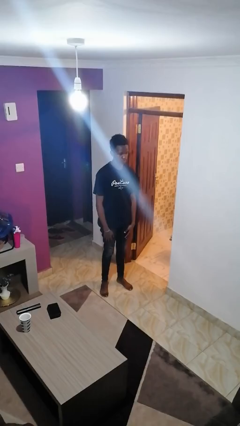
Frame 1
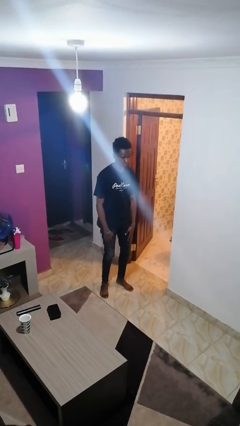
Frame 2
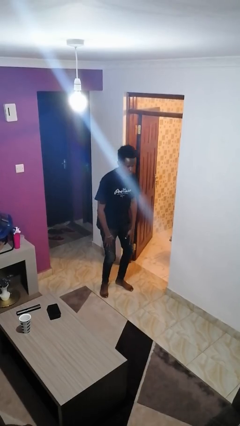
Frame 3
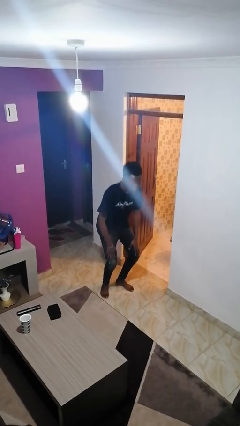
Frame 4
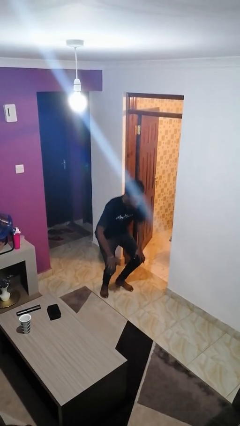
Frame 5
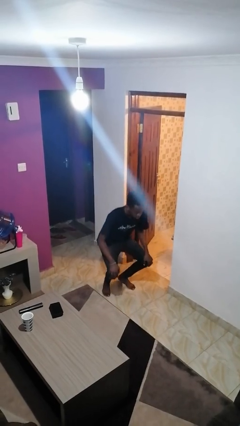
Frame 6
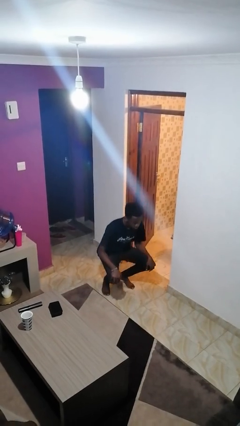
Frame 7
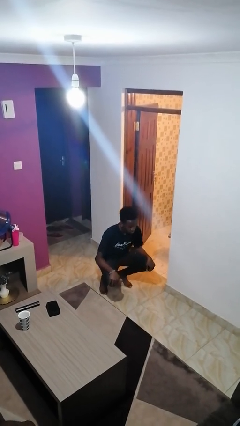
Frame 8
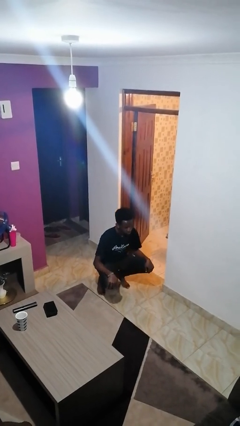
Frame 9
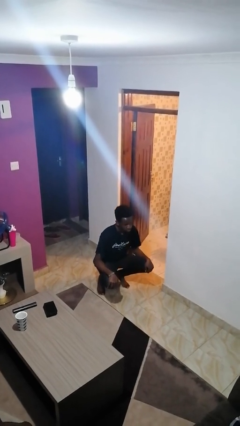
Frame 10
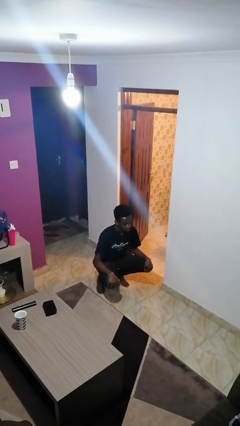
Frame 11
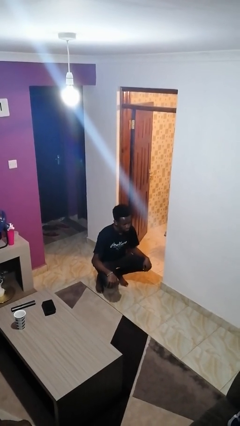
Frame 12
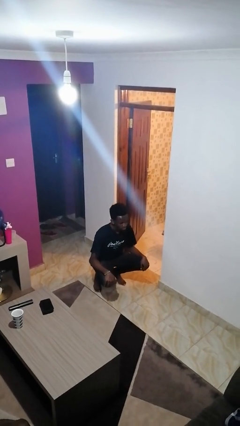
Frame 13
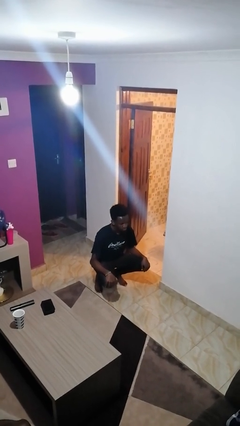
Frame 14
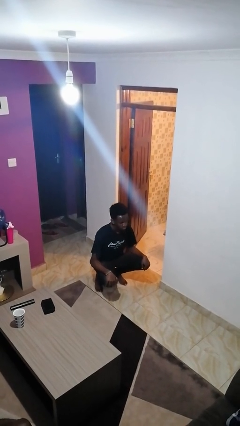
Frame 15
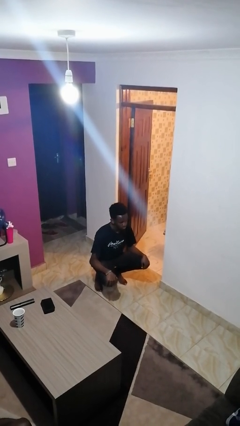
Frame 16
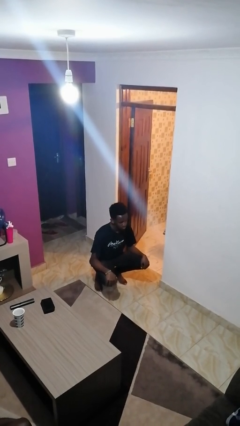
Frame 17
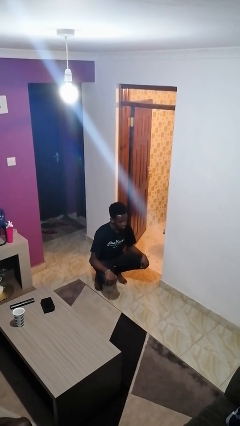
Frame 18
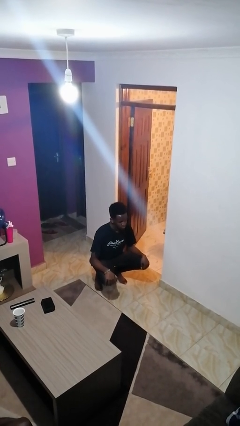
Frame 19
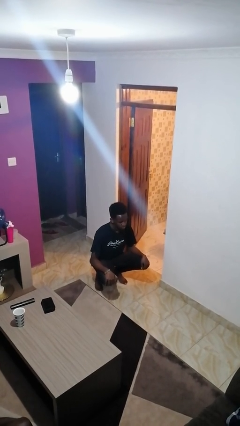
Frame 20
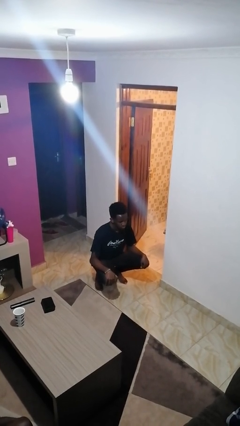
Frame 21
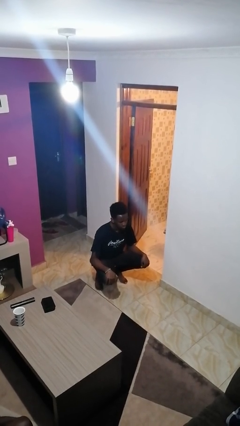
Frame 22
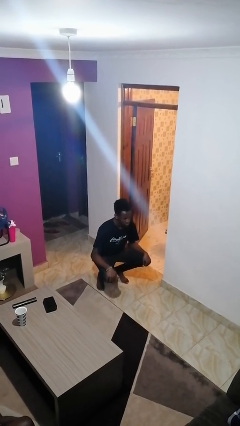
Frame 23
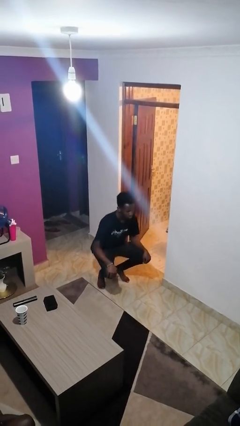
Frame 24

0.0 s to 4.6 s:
person squats

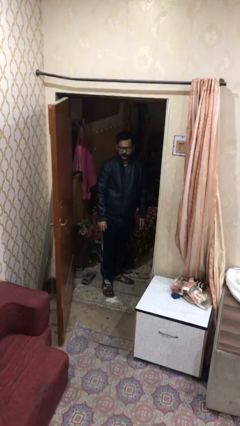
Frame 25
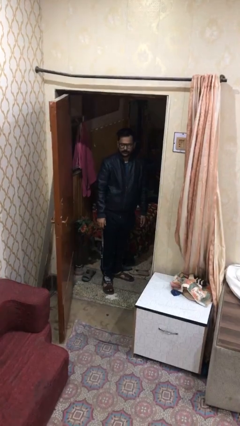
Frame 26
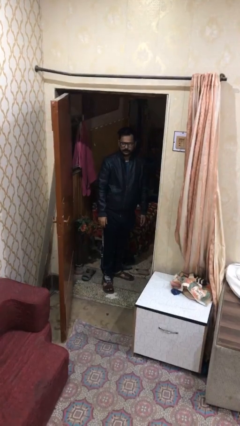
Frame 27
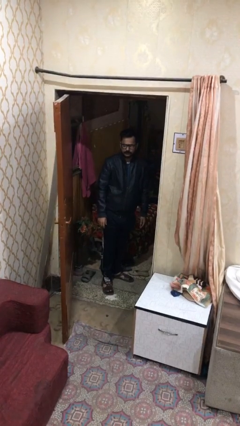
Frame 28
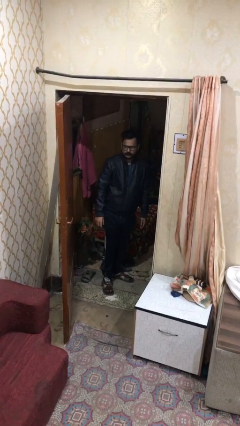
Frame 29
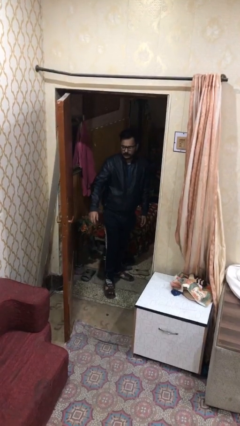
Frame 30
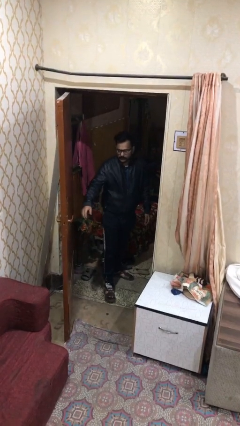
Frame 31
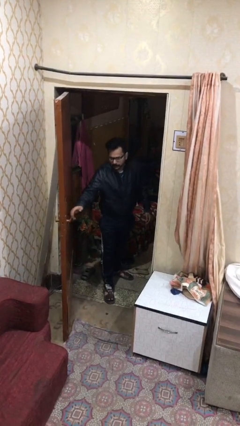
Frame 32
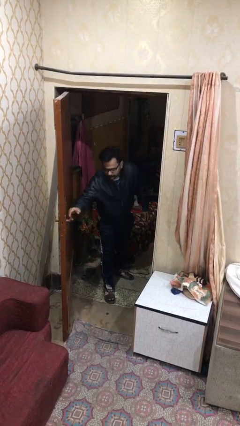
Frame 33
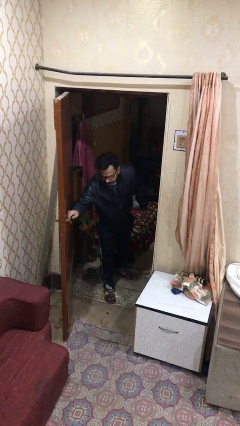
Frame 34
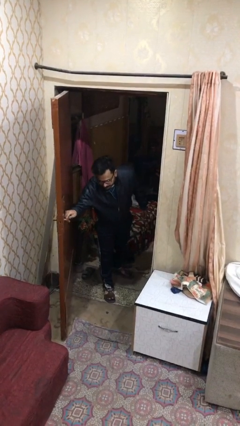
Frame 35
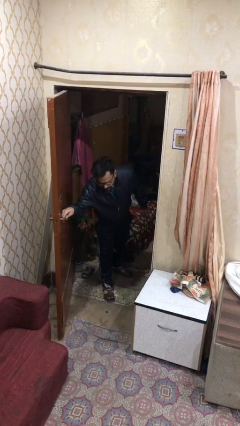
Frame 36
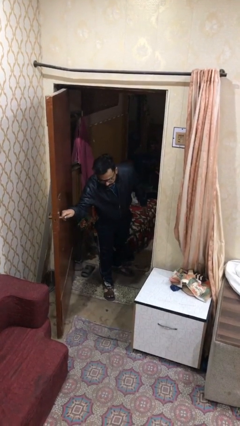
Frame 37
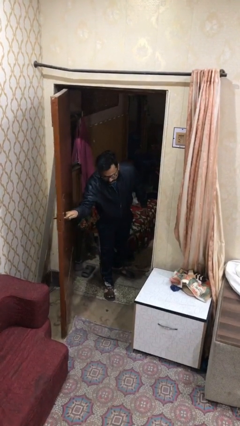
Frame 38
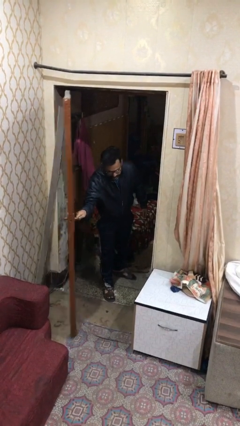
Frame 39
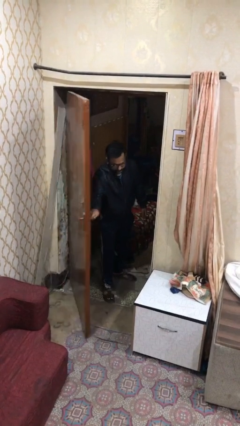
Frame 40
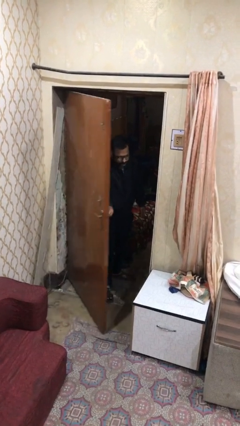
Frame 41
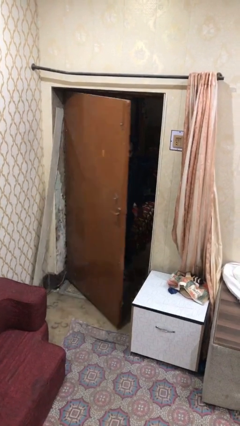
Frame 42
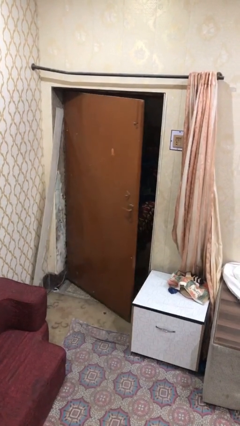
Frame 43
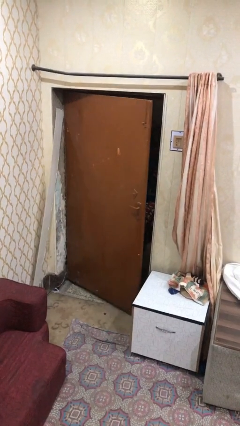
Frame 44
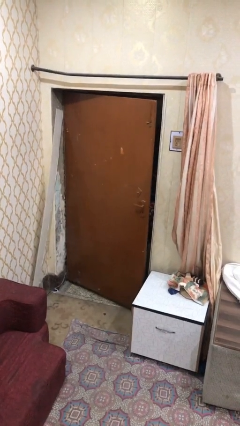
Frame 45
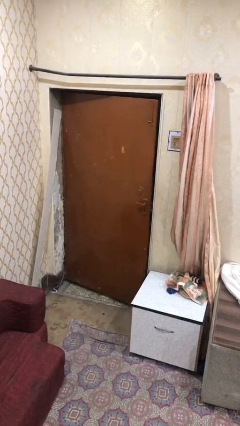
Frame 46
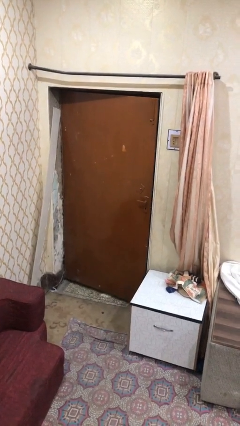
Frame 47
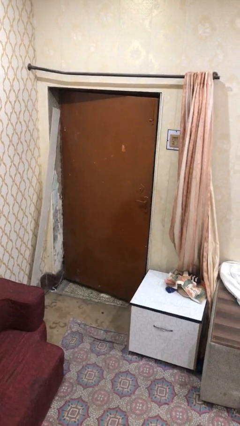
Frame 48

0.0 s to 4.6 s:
person closes facility door

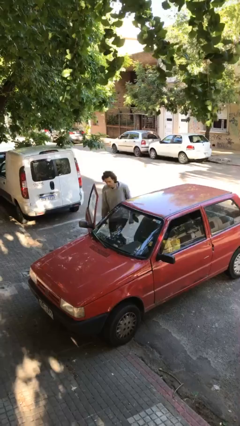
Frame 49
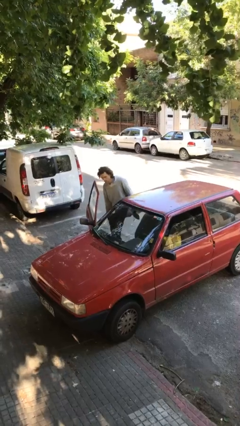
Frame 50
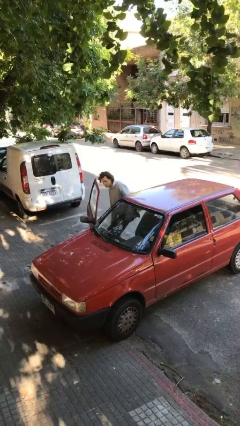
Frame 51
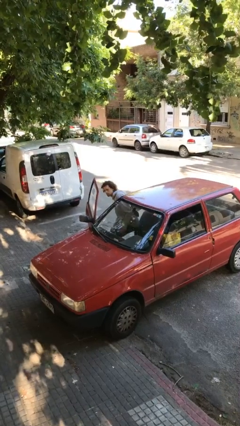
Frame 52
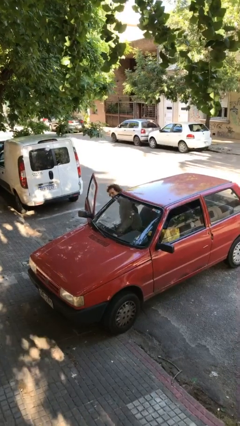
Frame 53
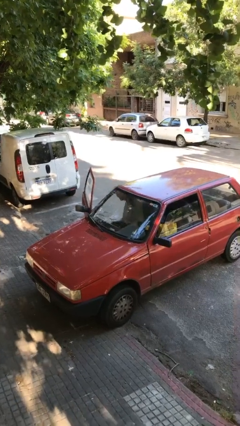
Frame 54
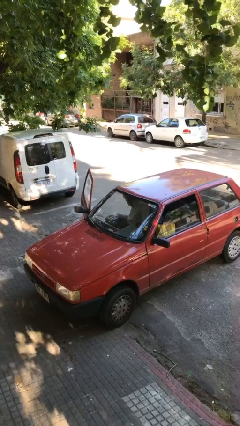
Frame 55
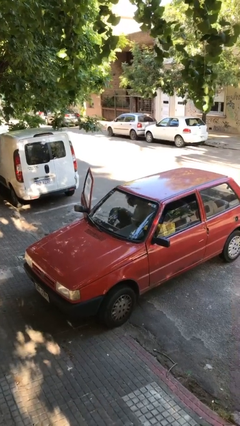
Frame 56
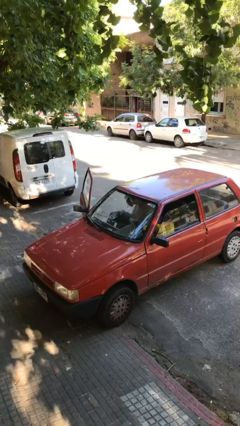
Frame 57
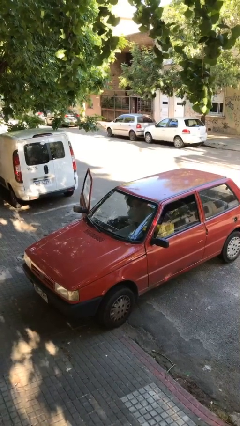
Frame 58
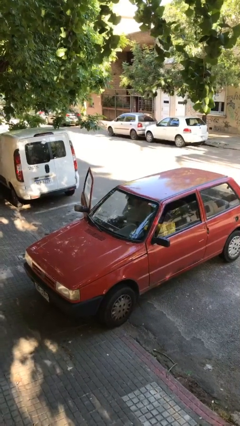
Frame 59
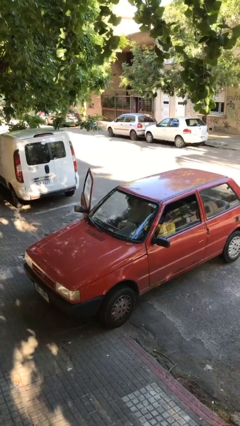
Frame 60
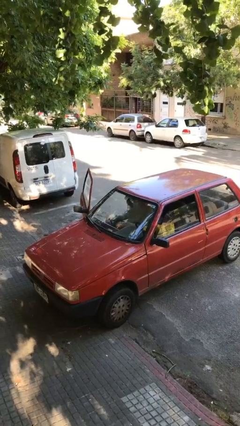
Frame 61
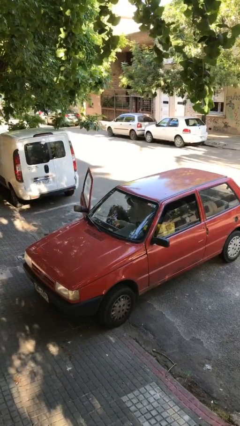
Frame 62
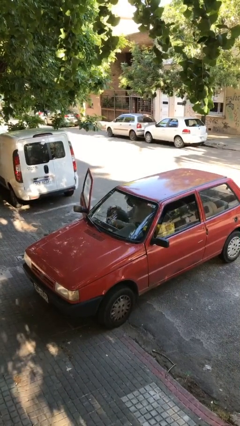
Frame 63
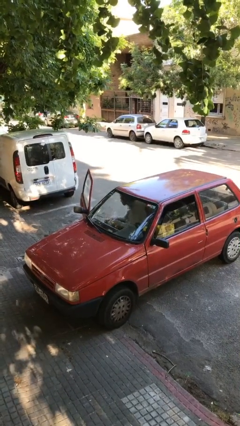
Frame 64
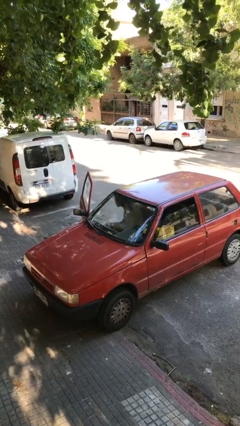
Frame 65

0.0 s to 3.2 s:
person enters car

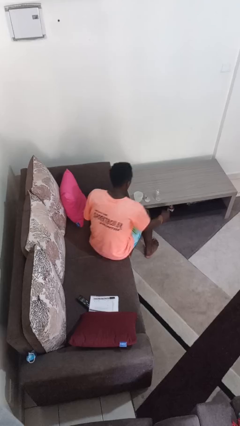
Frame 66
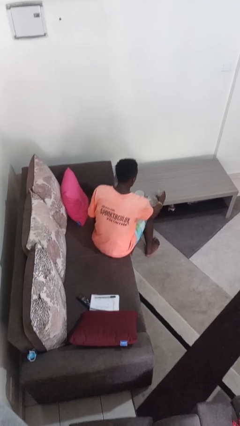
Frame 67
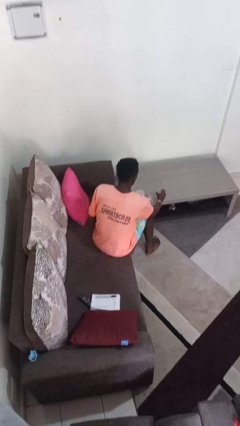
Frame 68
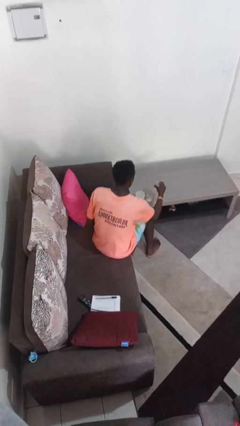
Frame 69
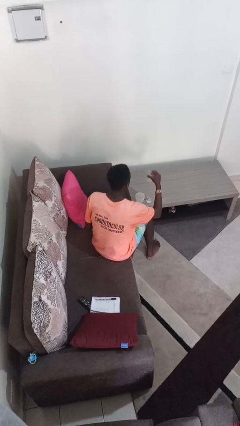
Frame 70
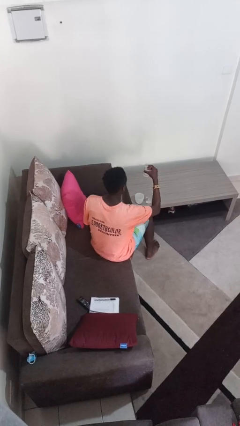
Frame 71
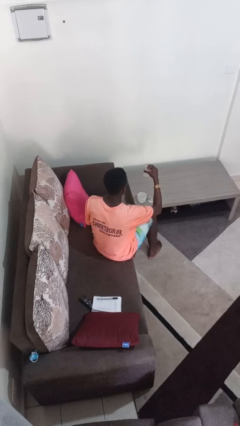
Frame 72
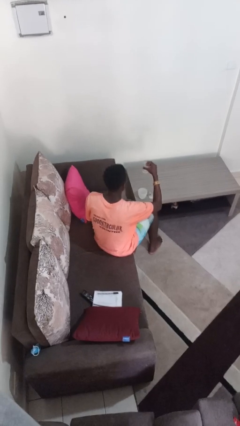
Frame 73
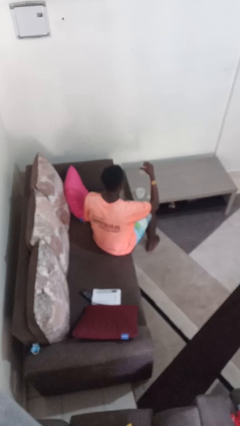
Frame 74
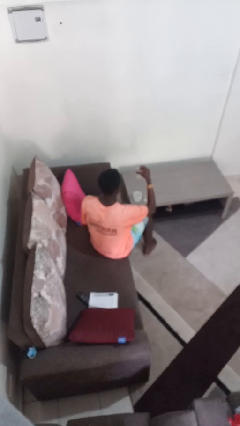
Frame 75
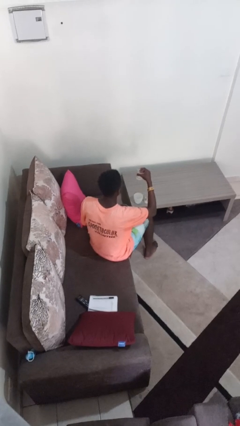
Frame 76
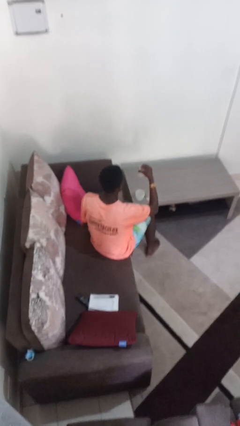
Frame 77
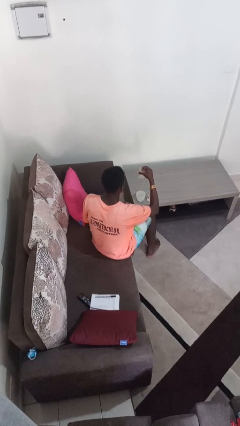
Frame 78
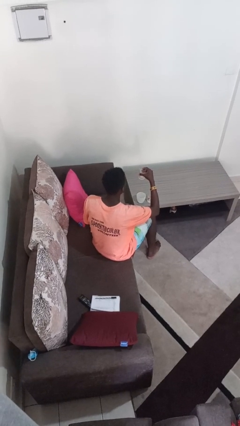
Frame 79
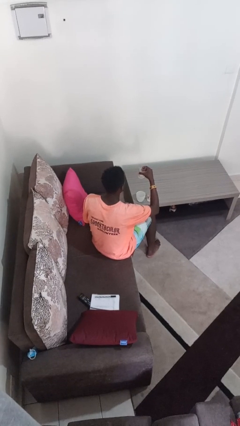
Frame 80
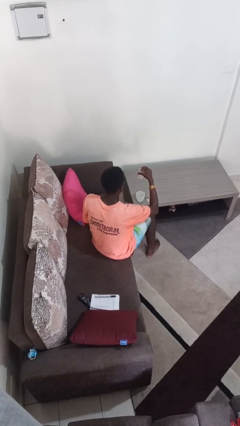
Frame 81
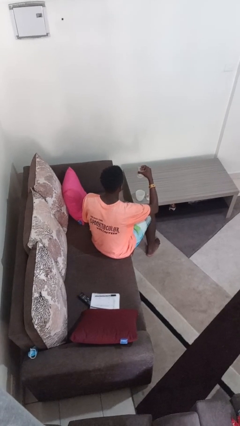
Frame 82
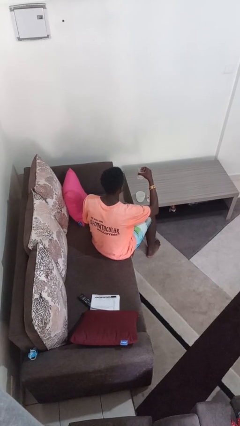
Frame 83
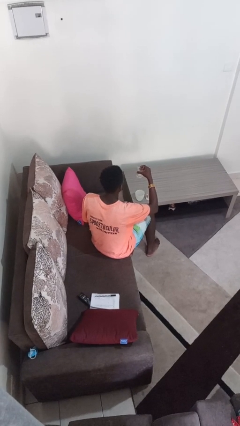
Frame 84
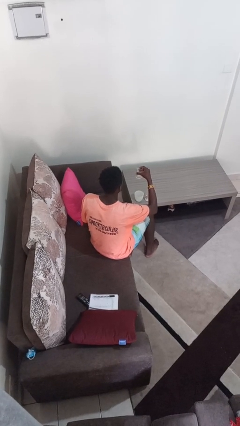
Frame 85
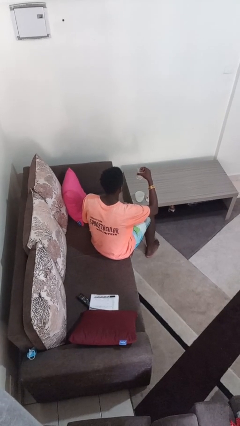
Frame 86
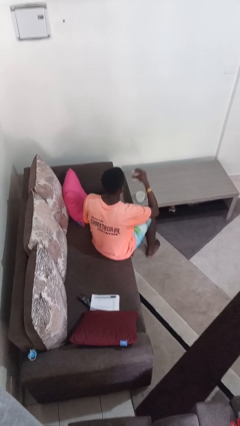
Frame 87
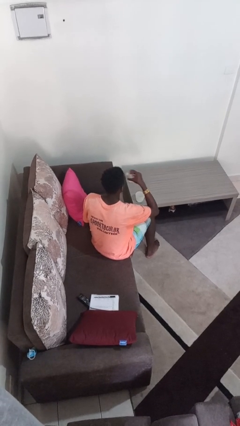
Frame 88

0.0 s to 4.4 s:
person picks up object from table

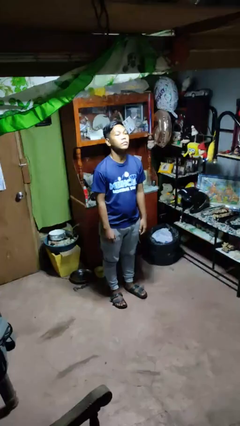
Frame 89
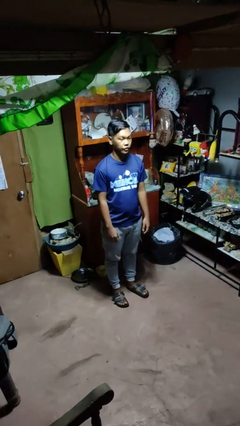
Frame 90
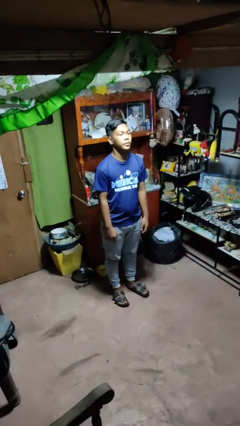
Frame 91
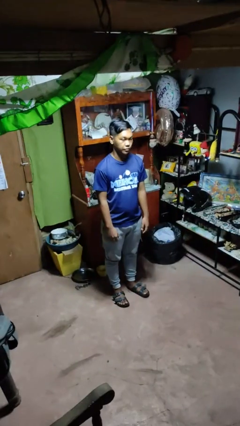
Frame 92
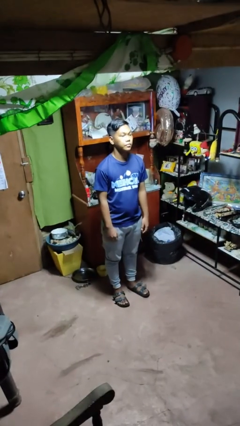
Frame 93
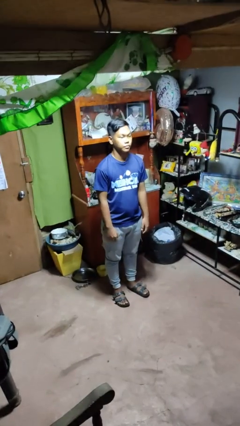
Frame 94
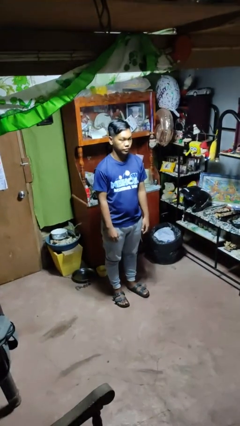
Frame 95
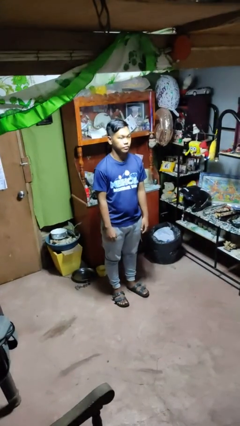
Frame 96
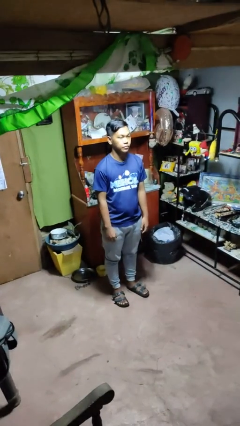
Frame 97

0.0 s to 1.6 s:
person nods head
